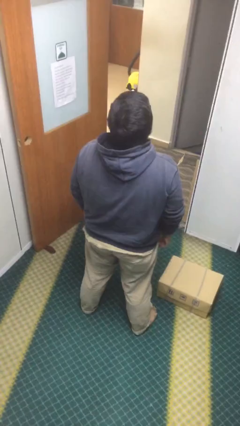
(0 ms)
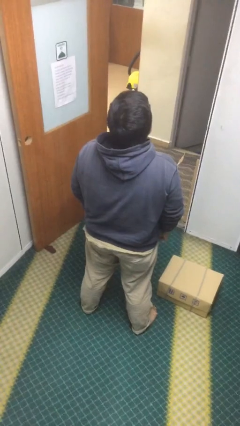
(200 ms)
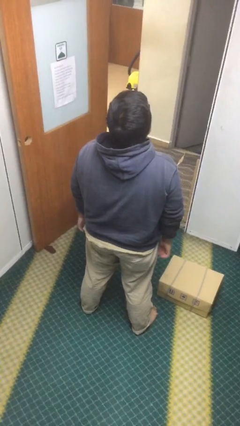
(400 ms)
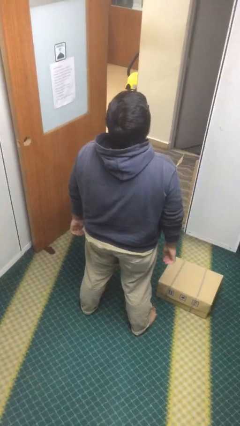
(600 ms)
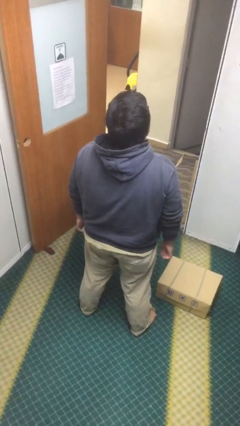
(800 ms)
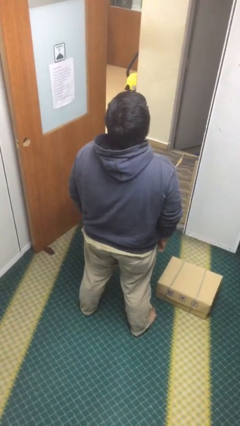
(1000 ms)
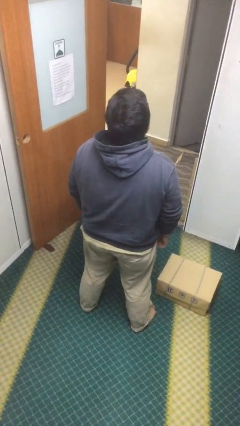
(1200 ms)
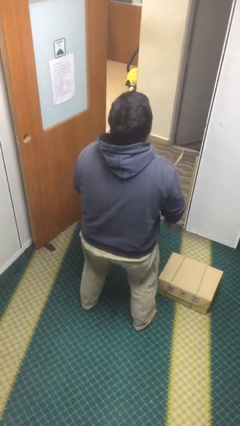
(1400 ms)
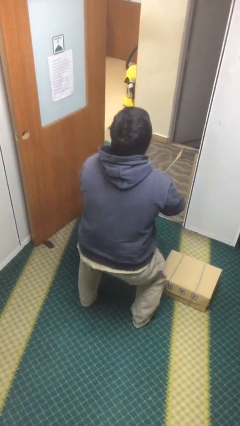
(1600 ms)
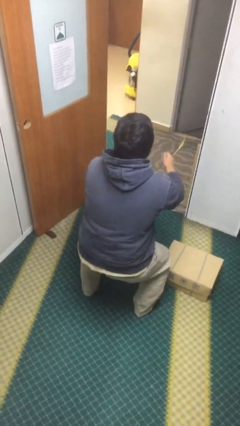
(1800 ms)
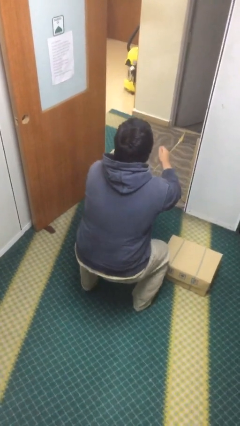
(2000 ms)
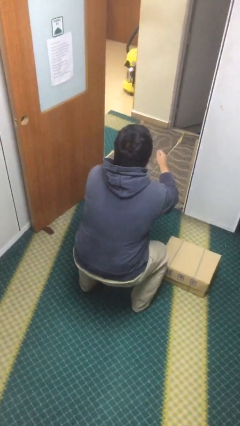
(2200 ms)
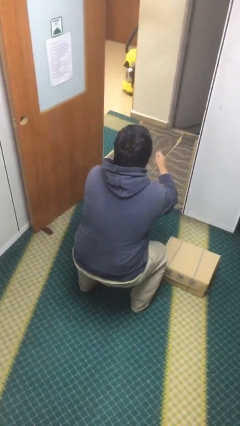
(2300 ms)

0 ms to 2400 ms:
person squats

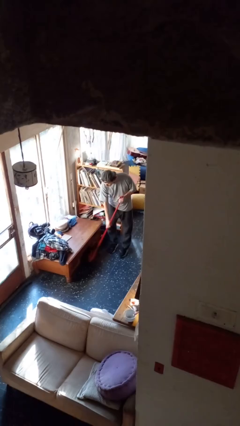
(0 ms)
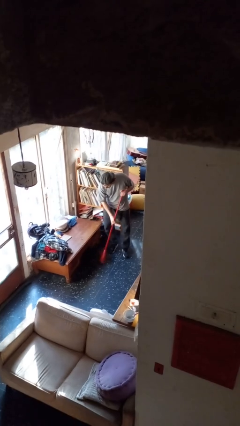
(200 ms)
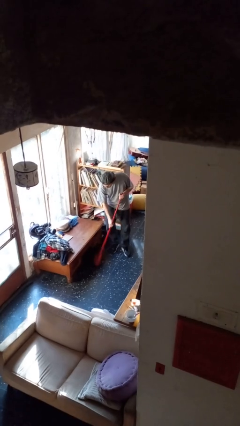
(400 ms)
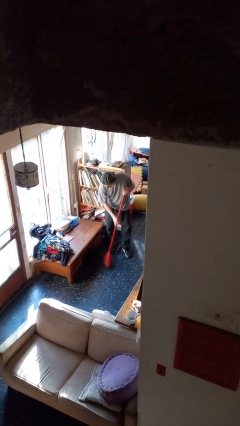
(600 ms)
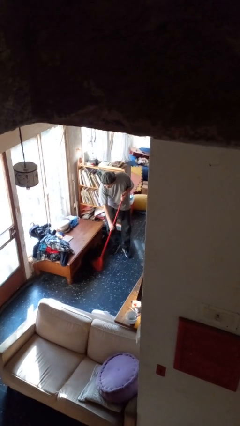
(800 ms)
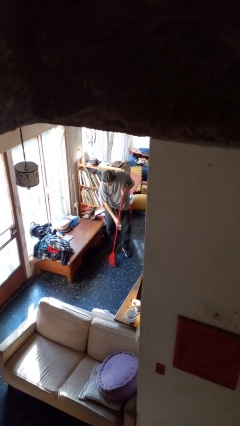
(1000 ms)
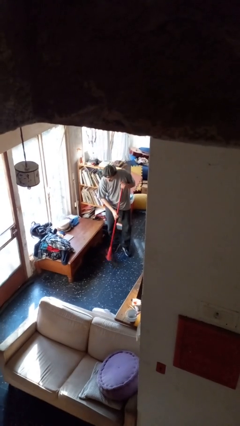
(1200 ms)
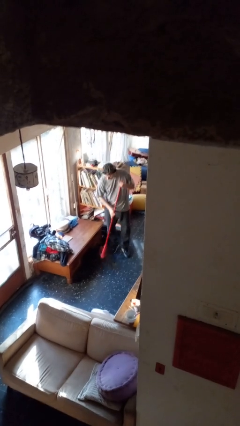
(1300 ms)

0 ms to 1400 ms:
person sweeps floor

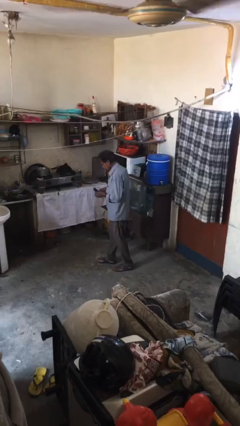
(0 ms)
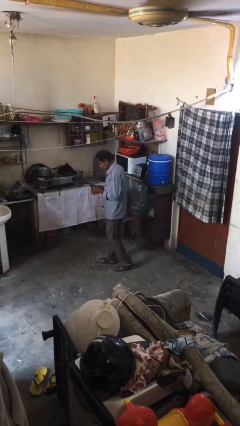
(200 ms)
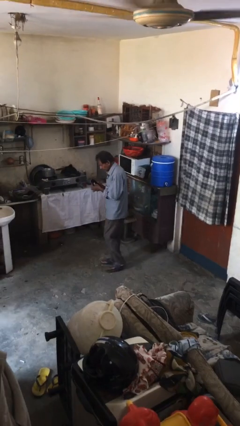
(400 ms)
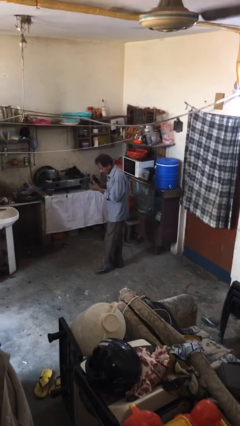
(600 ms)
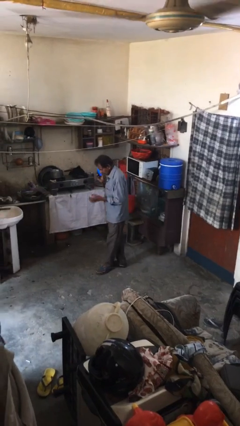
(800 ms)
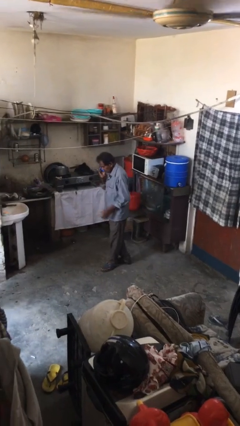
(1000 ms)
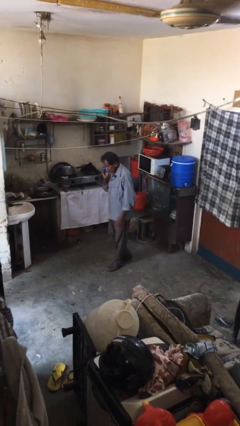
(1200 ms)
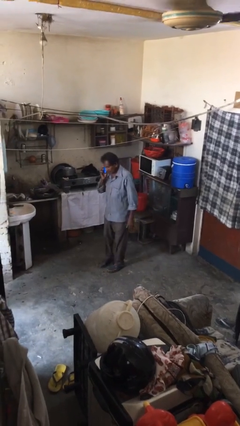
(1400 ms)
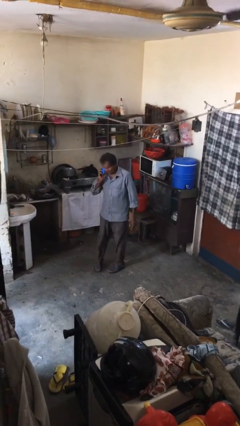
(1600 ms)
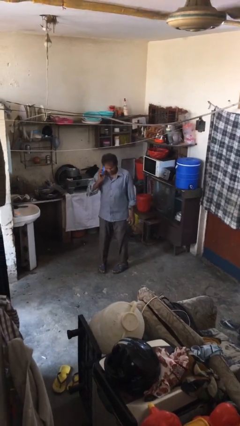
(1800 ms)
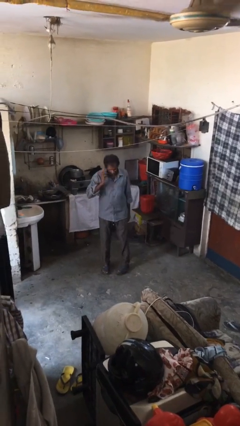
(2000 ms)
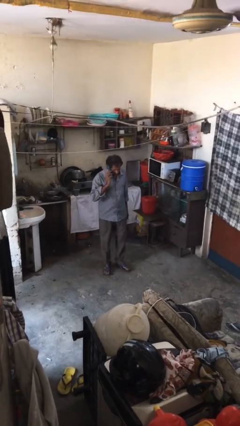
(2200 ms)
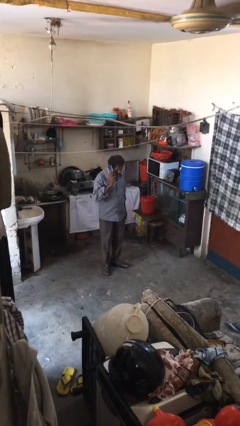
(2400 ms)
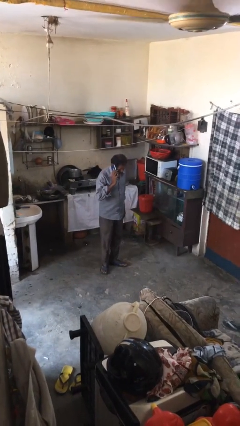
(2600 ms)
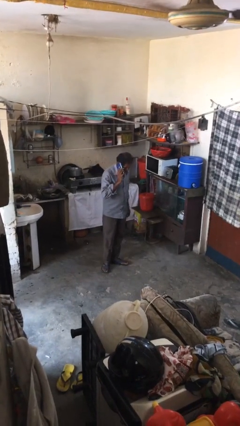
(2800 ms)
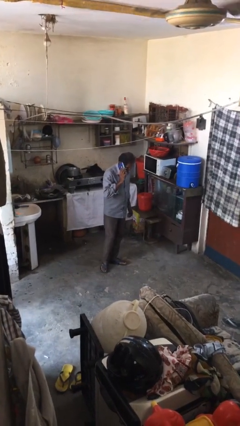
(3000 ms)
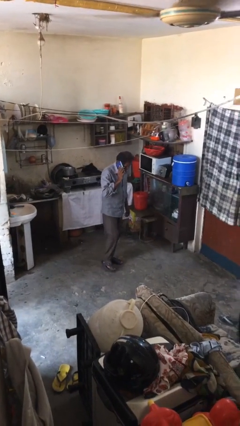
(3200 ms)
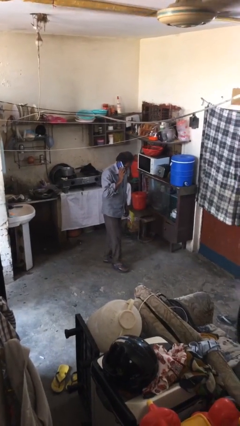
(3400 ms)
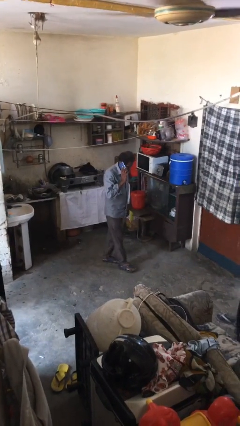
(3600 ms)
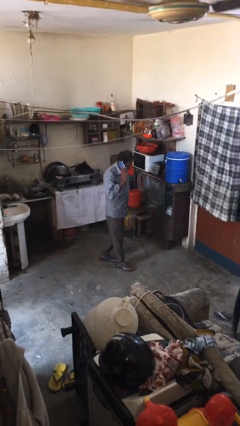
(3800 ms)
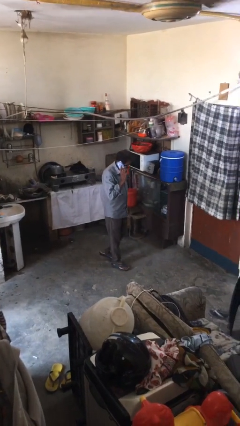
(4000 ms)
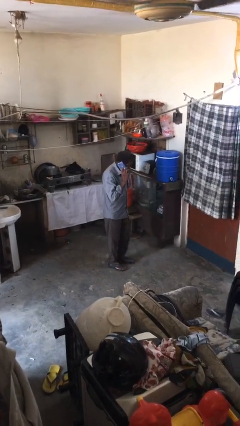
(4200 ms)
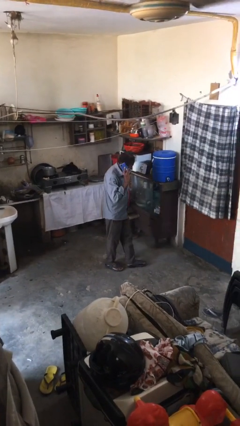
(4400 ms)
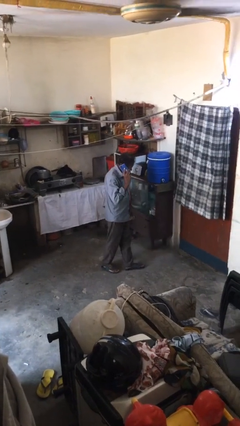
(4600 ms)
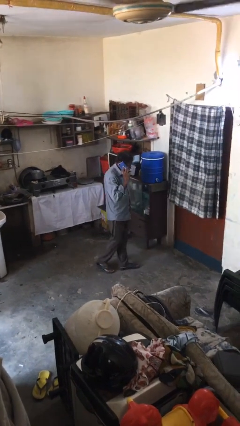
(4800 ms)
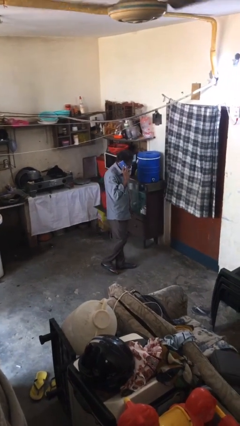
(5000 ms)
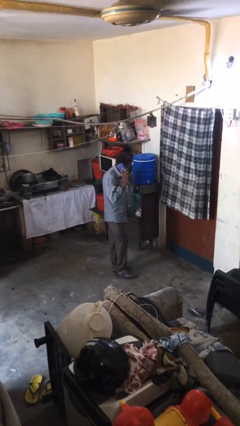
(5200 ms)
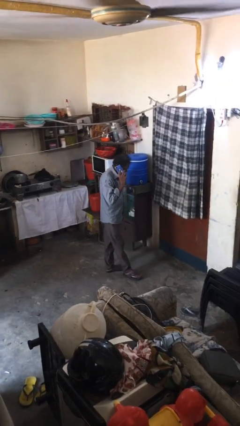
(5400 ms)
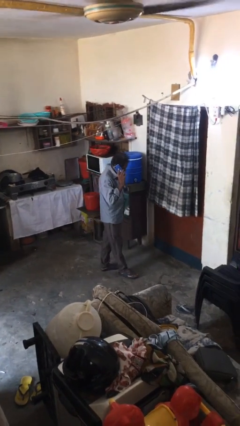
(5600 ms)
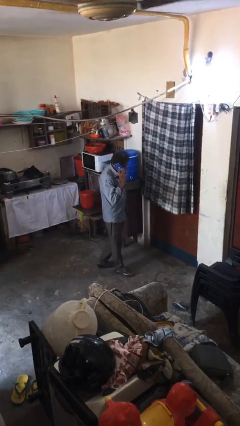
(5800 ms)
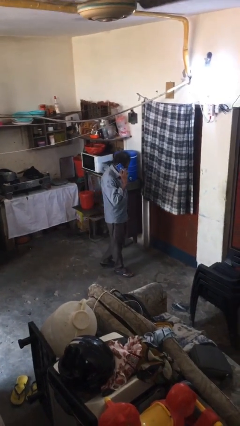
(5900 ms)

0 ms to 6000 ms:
person talks on phone

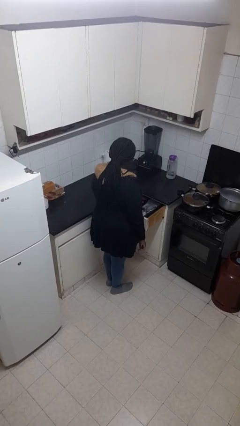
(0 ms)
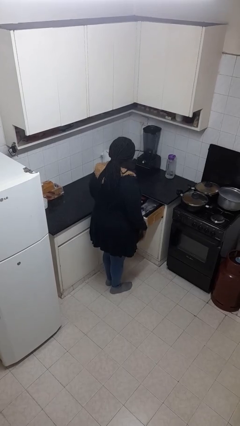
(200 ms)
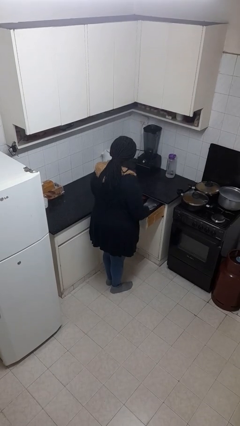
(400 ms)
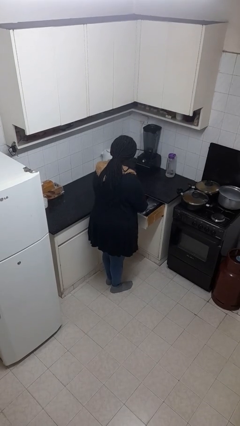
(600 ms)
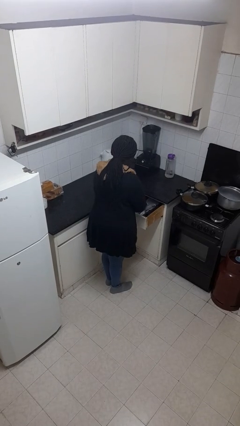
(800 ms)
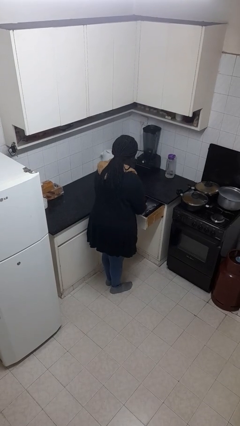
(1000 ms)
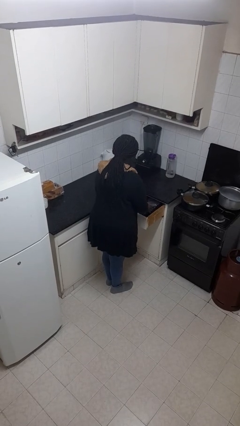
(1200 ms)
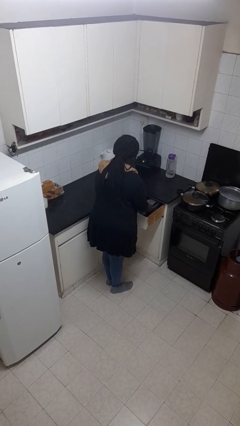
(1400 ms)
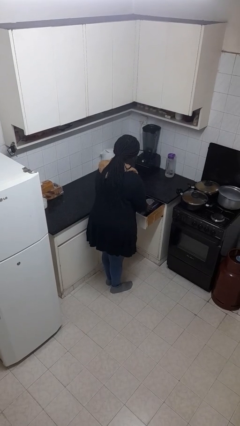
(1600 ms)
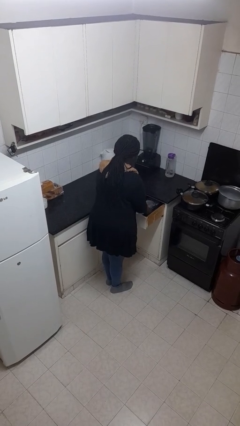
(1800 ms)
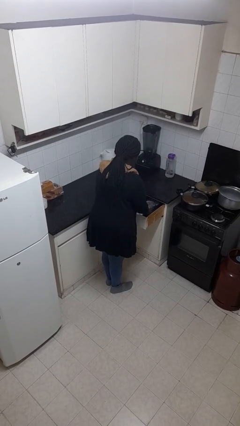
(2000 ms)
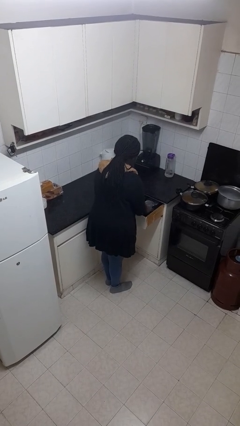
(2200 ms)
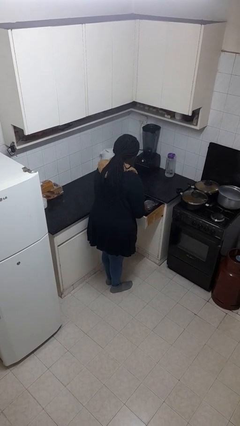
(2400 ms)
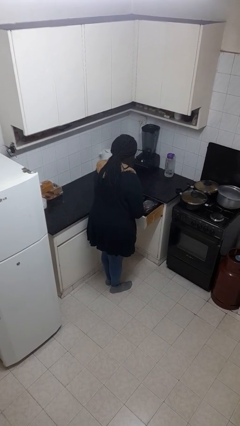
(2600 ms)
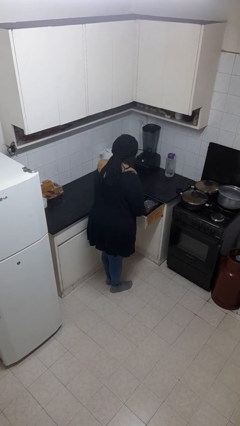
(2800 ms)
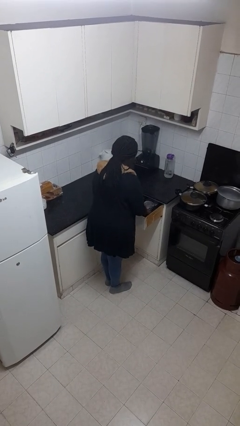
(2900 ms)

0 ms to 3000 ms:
person searches in kitchen drawer

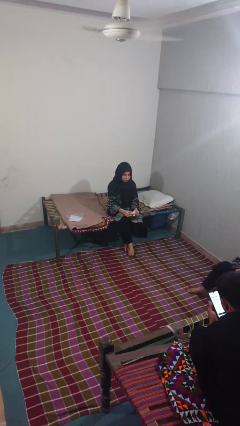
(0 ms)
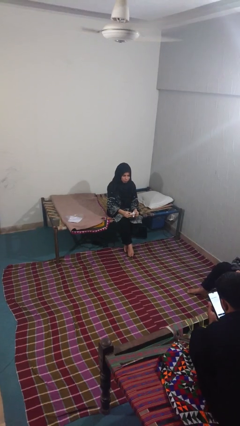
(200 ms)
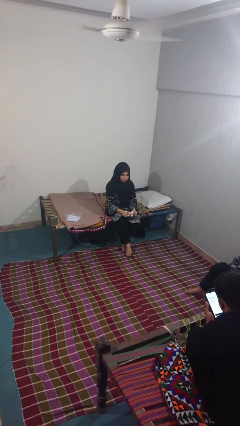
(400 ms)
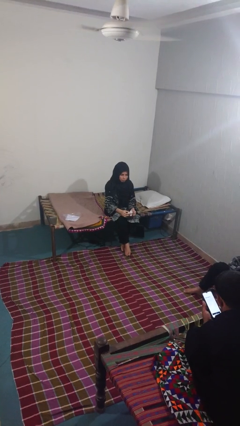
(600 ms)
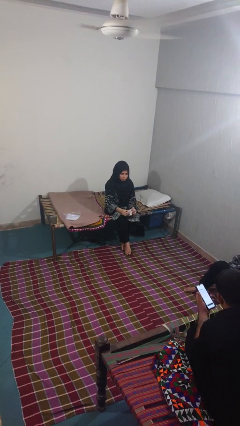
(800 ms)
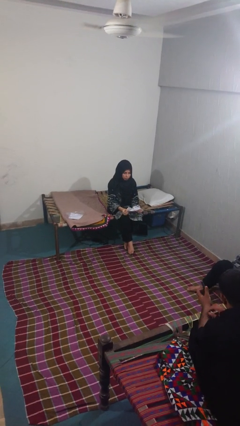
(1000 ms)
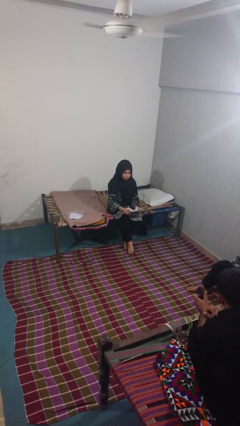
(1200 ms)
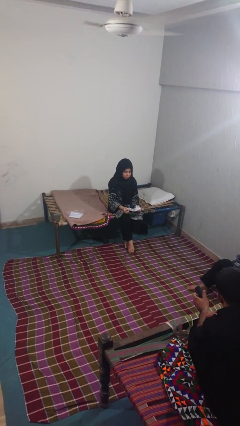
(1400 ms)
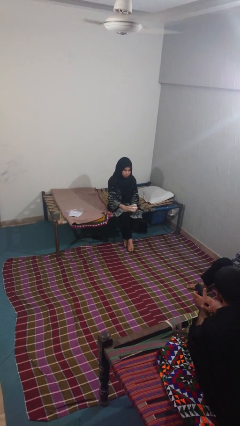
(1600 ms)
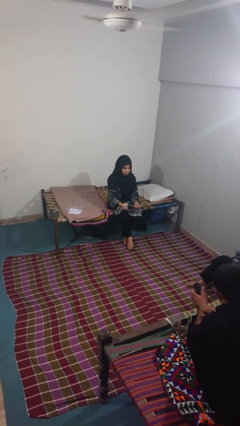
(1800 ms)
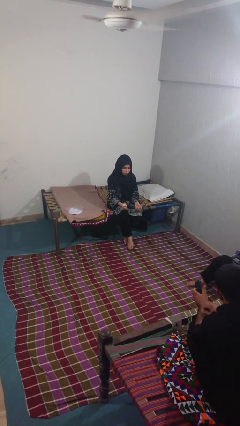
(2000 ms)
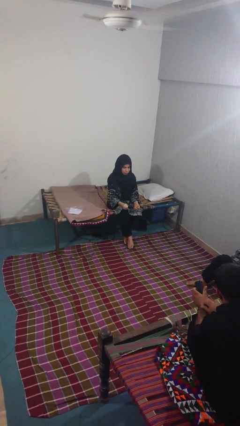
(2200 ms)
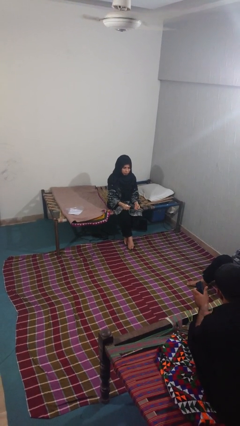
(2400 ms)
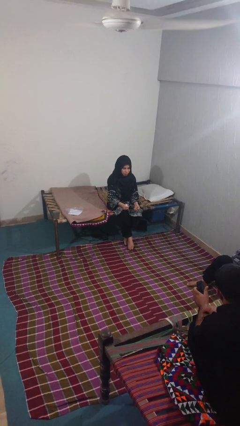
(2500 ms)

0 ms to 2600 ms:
person crumples paper

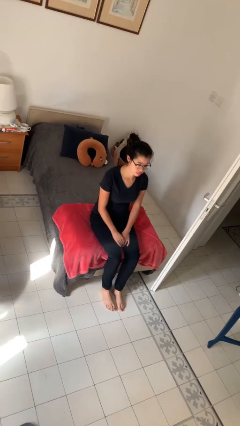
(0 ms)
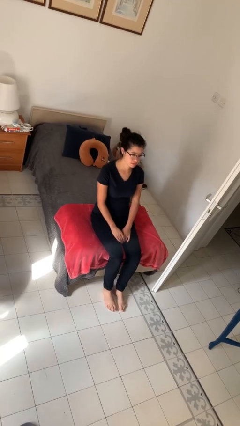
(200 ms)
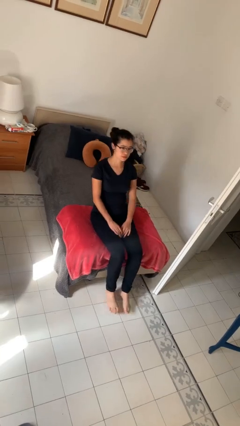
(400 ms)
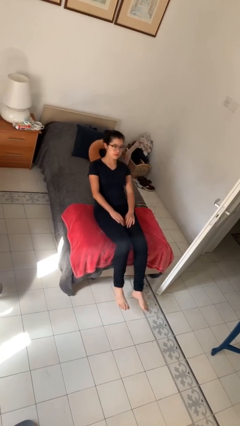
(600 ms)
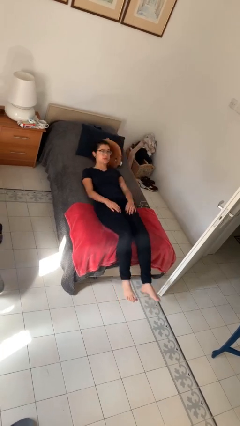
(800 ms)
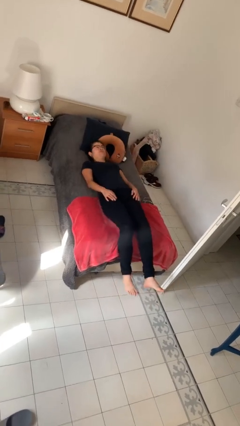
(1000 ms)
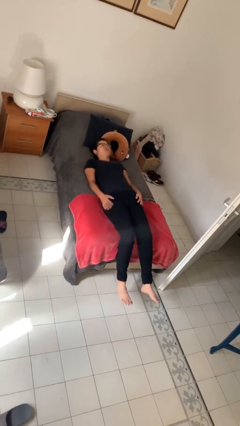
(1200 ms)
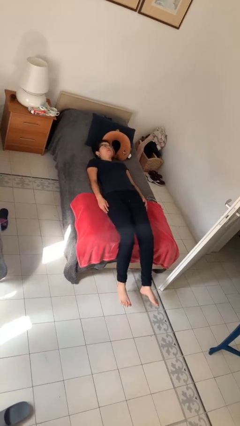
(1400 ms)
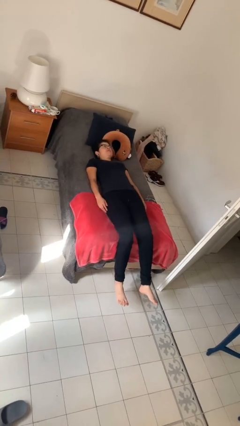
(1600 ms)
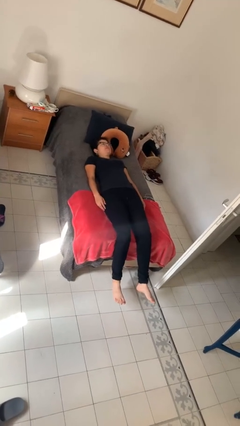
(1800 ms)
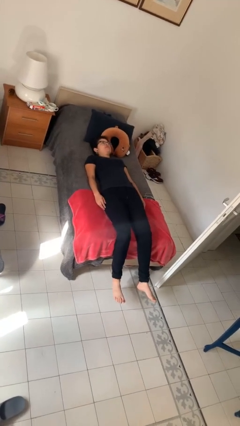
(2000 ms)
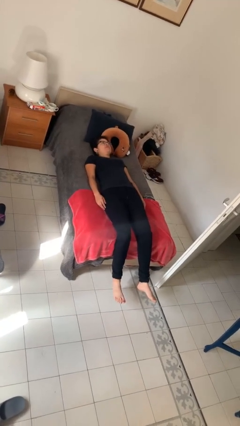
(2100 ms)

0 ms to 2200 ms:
person lies down on bed
